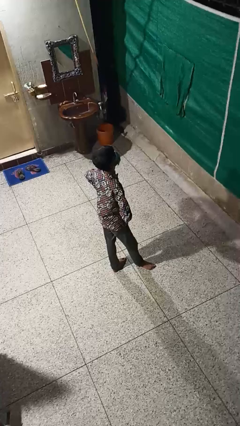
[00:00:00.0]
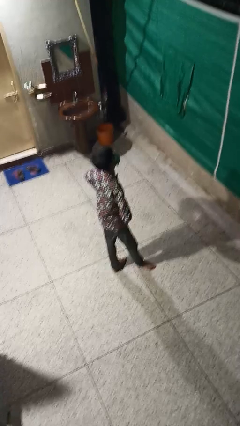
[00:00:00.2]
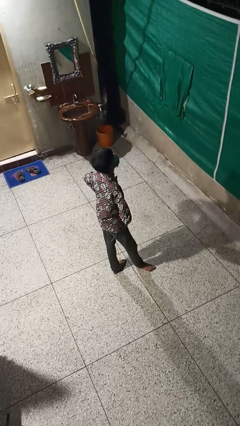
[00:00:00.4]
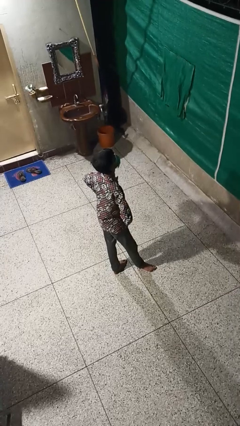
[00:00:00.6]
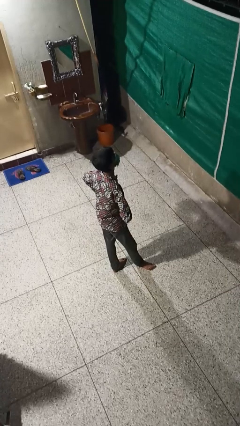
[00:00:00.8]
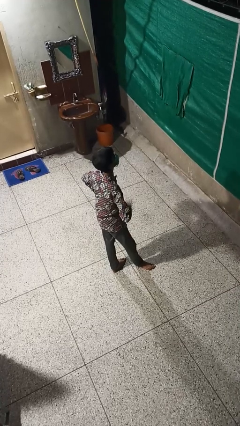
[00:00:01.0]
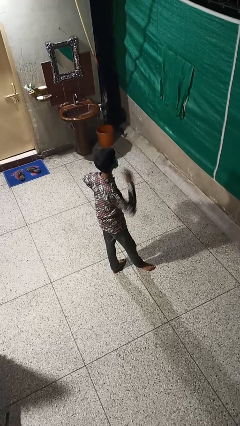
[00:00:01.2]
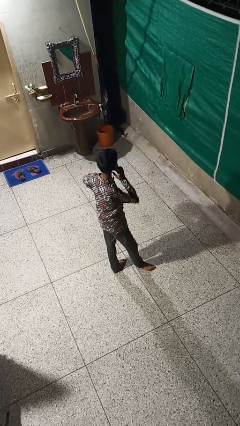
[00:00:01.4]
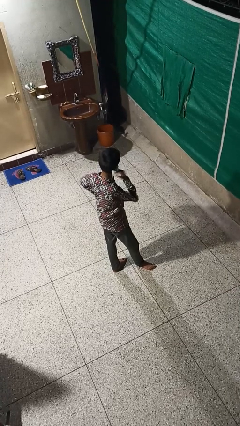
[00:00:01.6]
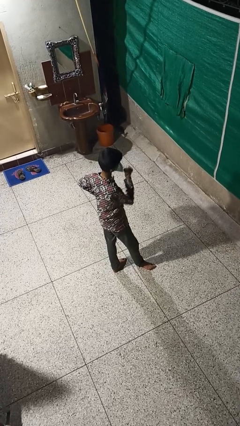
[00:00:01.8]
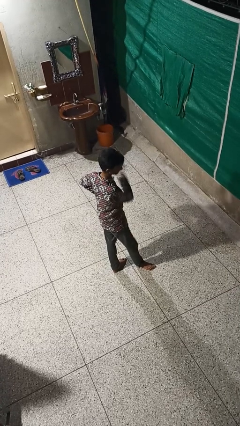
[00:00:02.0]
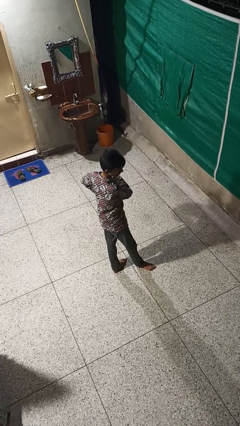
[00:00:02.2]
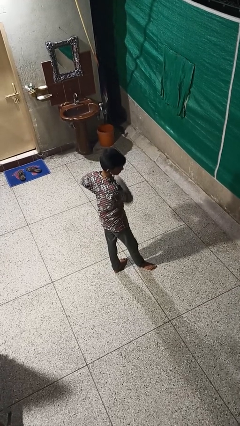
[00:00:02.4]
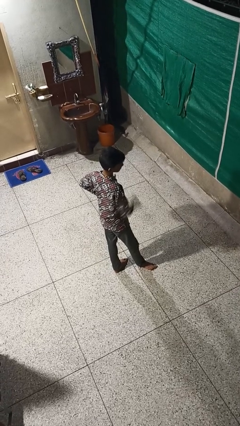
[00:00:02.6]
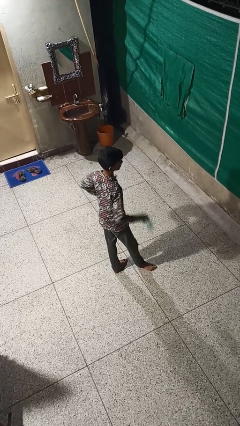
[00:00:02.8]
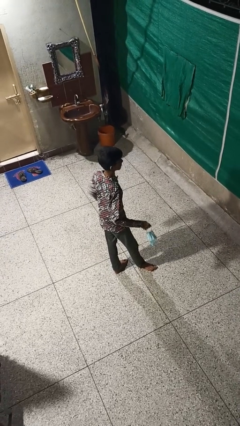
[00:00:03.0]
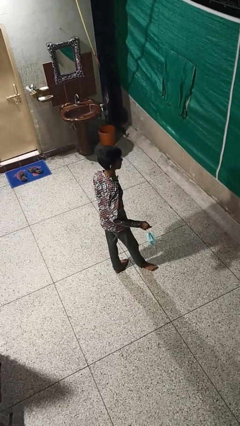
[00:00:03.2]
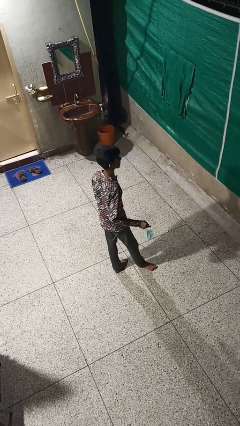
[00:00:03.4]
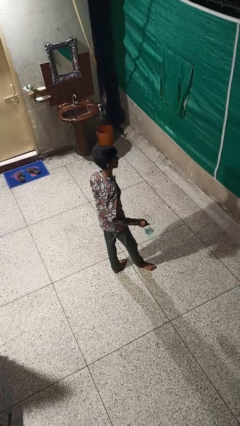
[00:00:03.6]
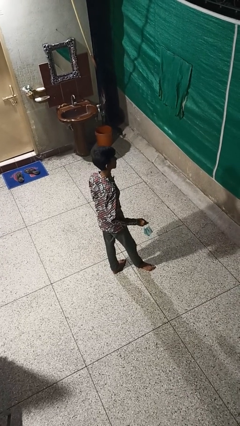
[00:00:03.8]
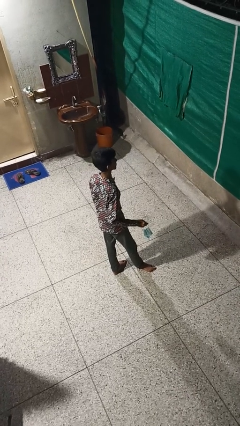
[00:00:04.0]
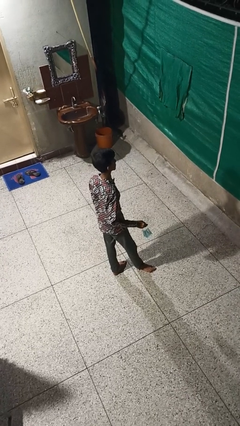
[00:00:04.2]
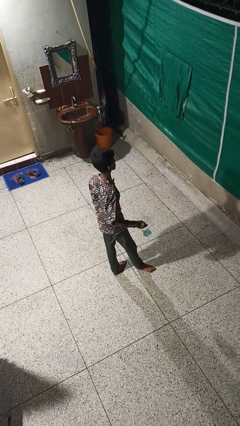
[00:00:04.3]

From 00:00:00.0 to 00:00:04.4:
person takes off facemask

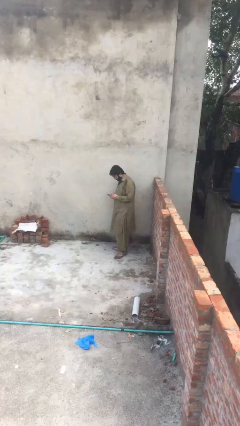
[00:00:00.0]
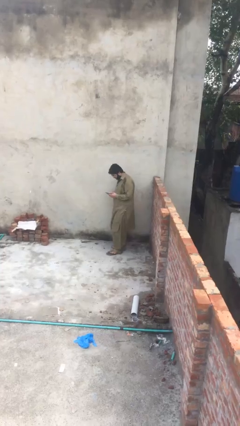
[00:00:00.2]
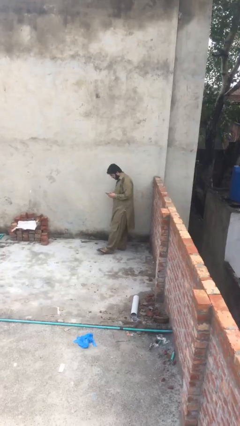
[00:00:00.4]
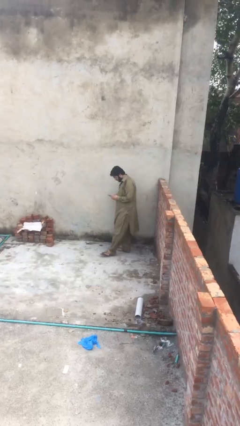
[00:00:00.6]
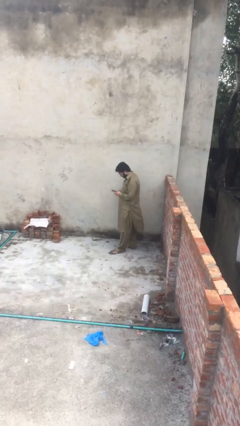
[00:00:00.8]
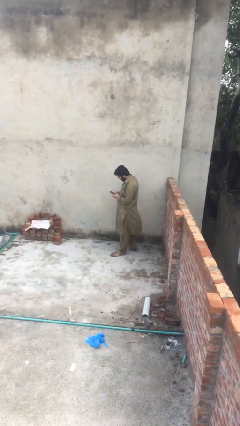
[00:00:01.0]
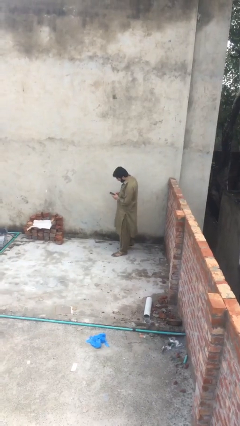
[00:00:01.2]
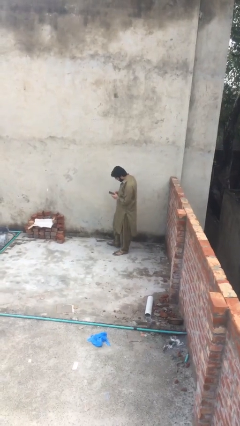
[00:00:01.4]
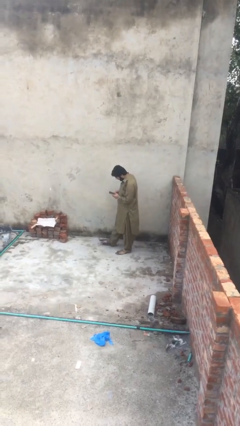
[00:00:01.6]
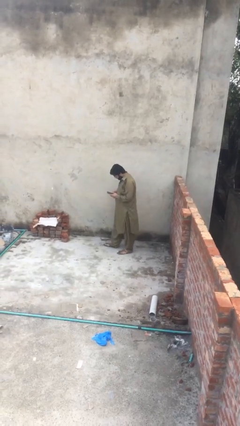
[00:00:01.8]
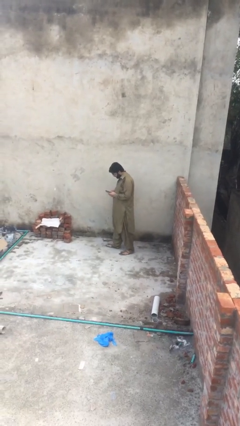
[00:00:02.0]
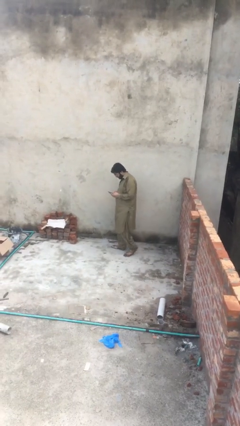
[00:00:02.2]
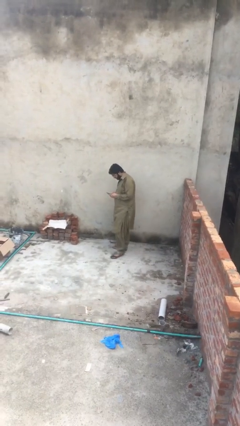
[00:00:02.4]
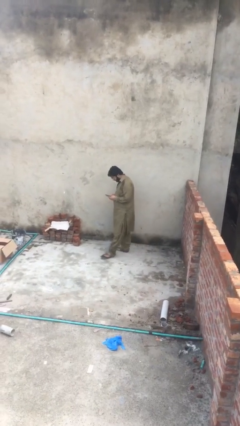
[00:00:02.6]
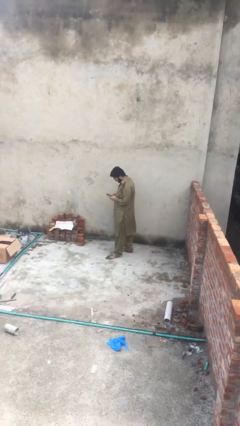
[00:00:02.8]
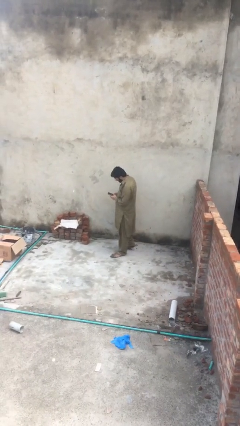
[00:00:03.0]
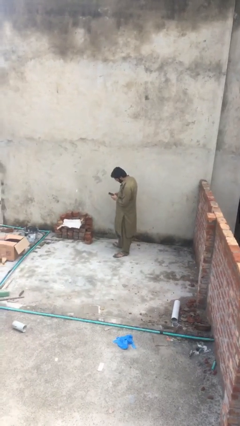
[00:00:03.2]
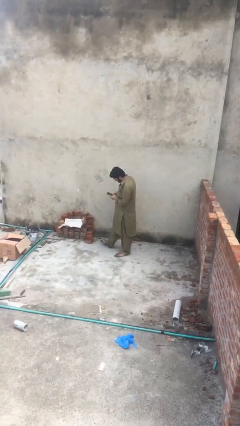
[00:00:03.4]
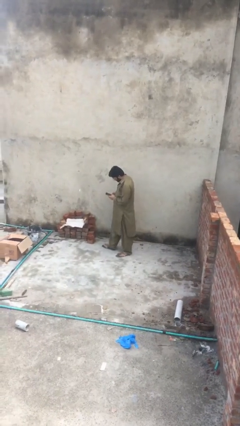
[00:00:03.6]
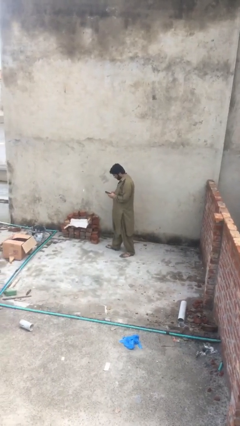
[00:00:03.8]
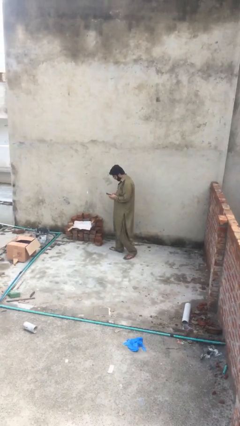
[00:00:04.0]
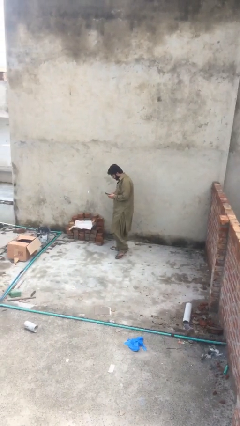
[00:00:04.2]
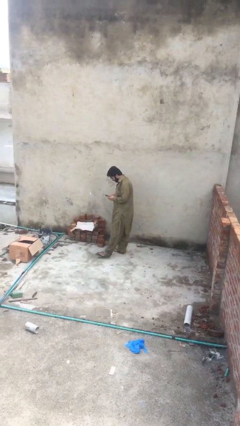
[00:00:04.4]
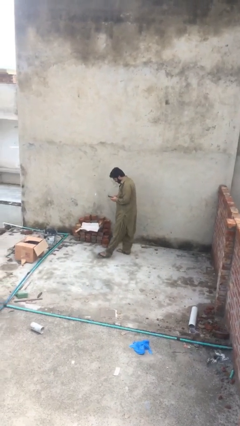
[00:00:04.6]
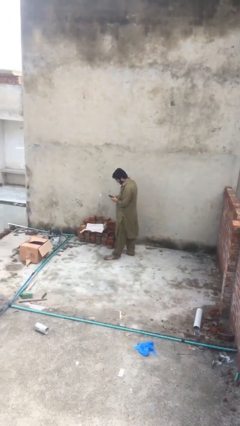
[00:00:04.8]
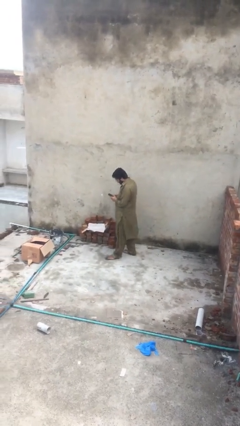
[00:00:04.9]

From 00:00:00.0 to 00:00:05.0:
person texts on phone

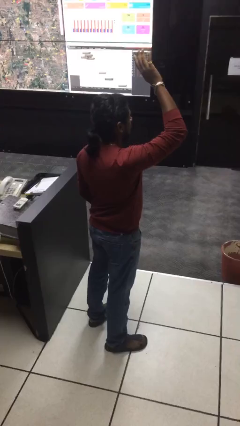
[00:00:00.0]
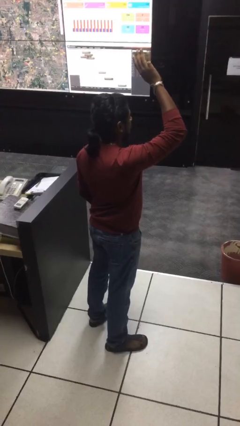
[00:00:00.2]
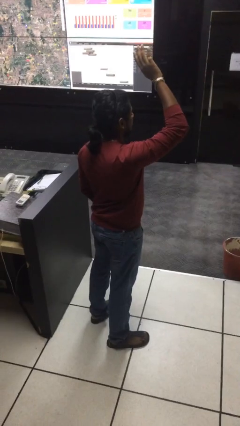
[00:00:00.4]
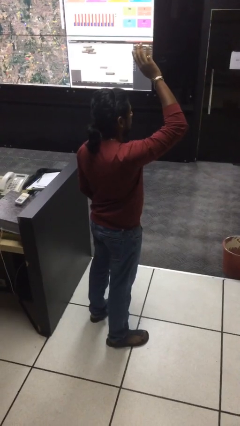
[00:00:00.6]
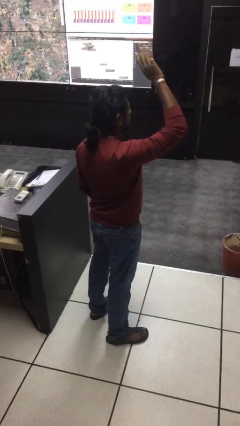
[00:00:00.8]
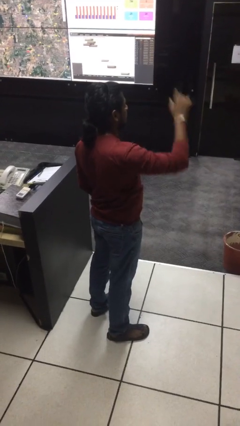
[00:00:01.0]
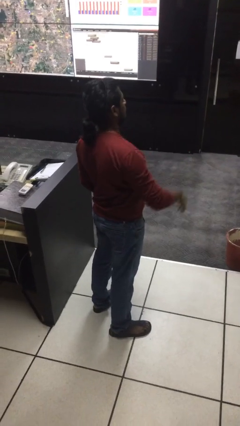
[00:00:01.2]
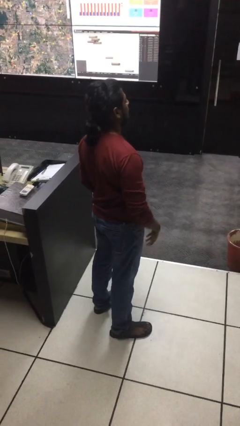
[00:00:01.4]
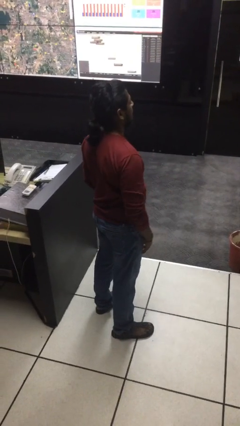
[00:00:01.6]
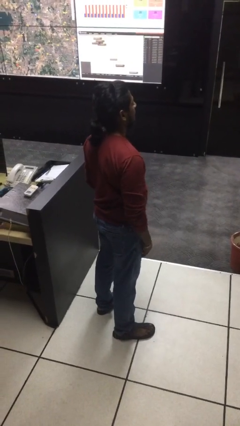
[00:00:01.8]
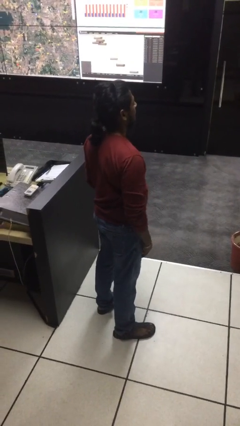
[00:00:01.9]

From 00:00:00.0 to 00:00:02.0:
person gestures lower hand

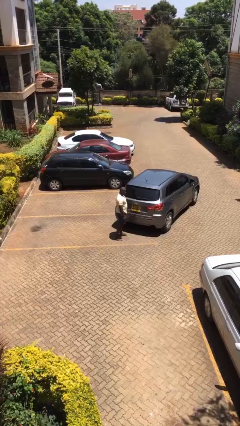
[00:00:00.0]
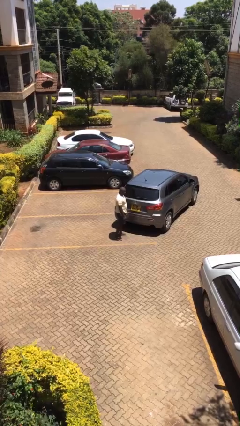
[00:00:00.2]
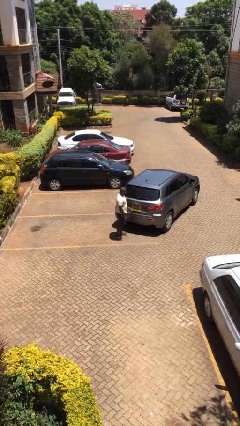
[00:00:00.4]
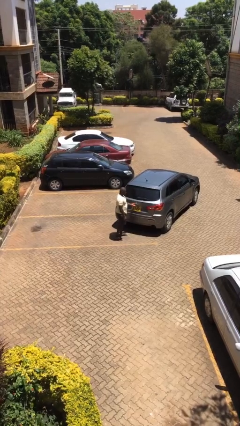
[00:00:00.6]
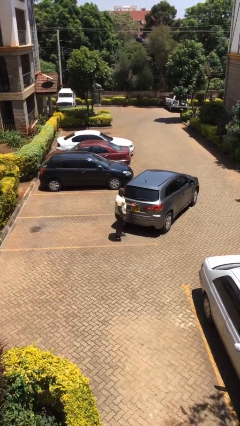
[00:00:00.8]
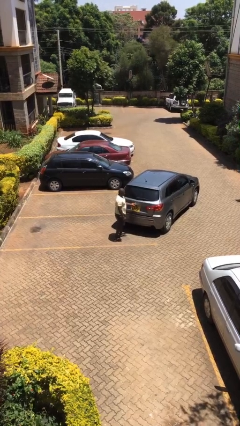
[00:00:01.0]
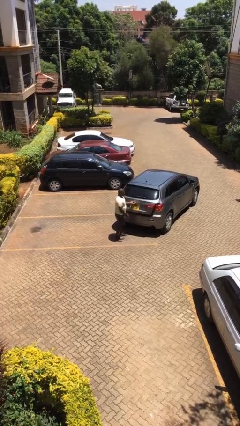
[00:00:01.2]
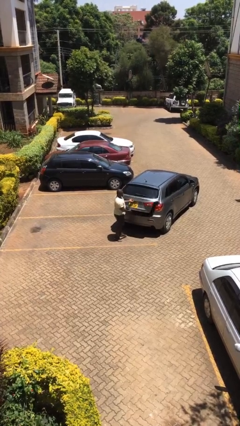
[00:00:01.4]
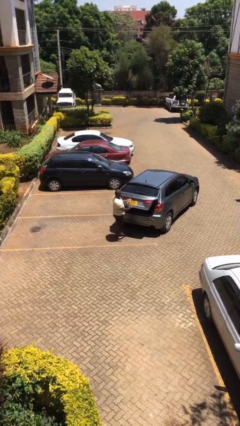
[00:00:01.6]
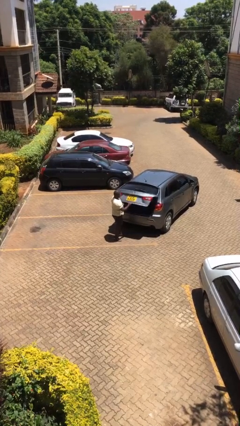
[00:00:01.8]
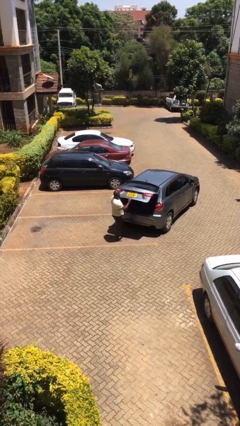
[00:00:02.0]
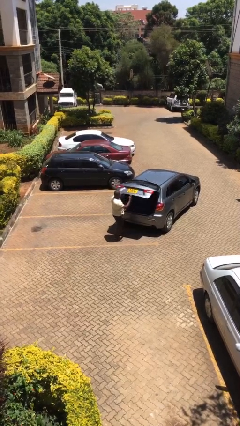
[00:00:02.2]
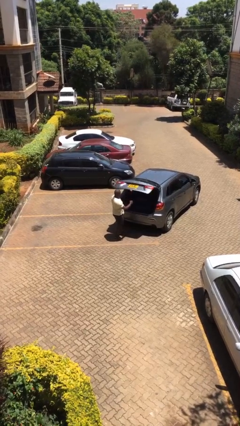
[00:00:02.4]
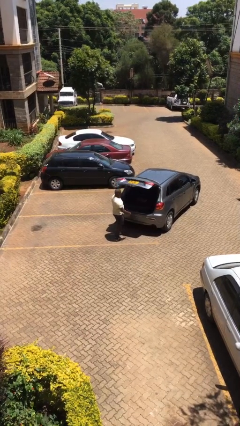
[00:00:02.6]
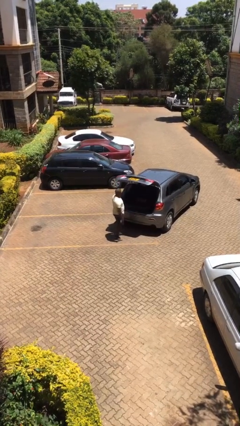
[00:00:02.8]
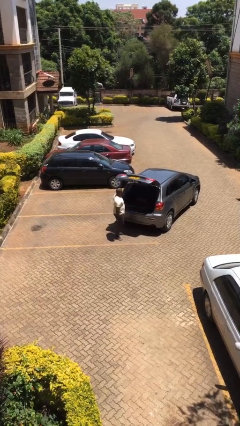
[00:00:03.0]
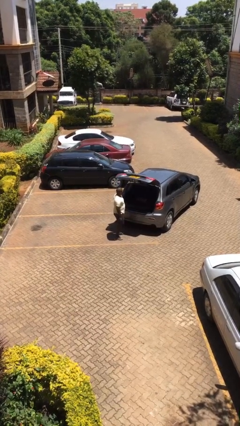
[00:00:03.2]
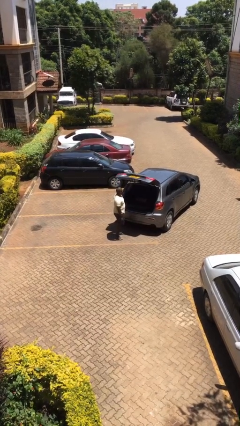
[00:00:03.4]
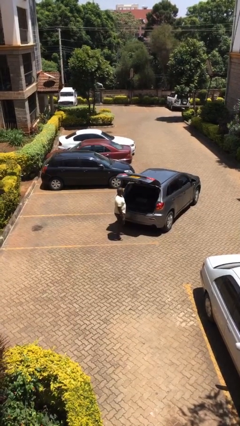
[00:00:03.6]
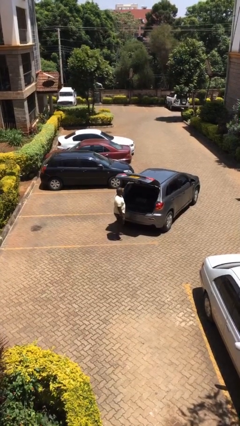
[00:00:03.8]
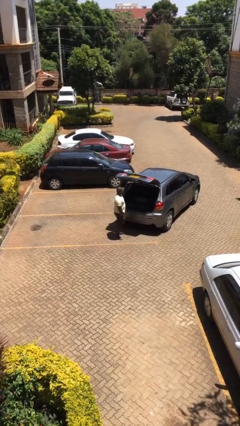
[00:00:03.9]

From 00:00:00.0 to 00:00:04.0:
person opens car trunk

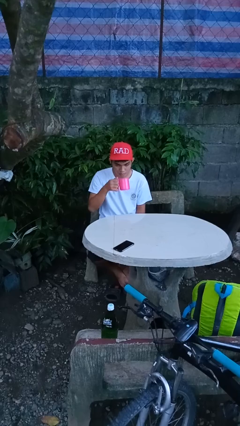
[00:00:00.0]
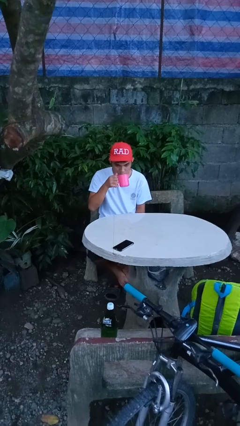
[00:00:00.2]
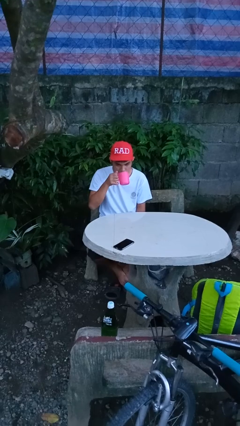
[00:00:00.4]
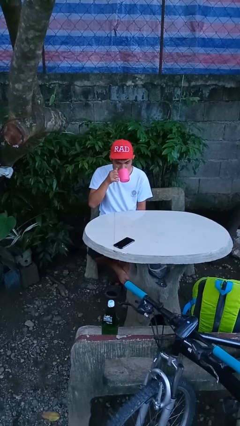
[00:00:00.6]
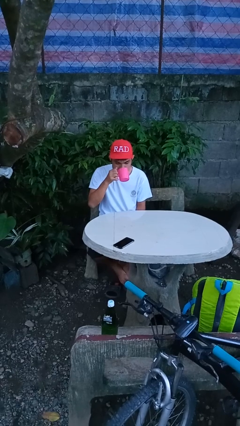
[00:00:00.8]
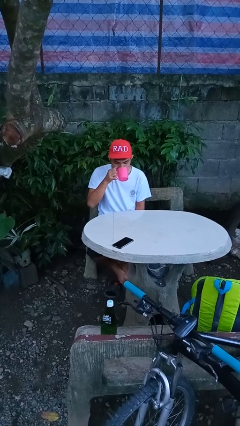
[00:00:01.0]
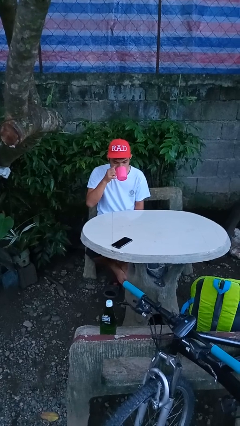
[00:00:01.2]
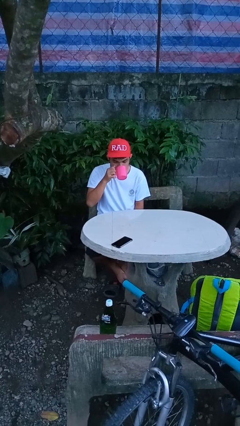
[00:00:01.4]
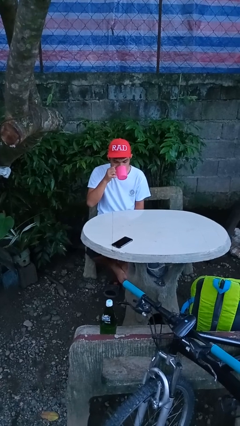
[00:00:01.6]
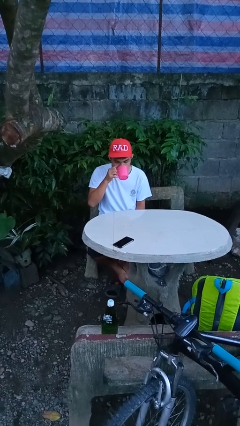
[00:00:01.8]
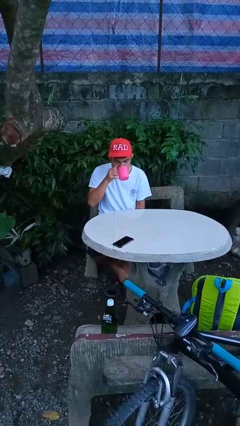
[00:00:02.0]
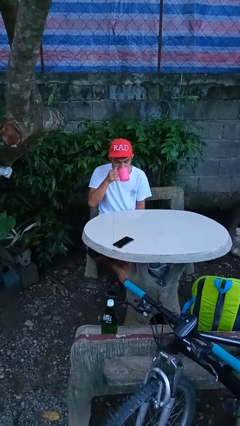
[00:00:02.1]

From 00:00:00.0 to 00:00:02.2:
person drinks from mug
